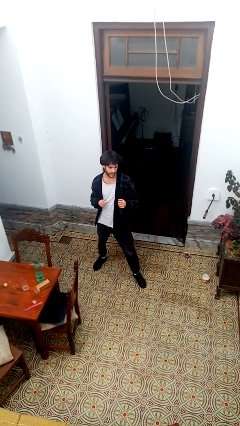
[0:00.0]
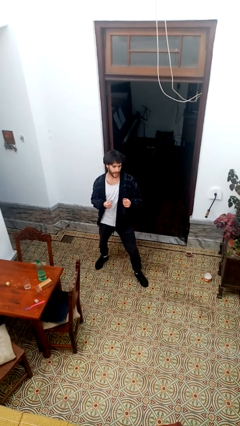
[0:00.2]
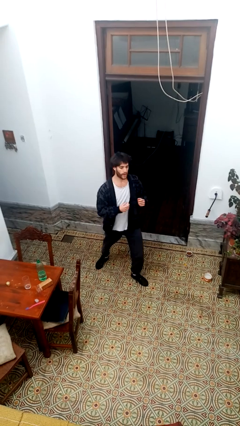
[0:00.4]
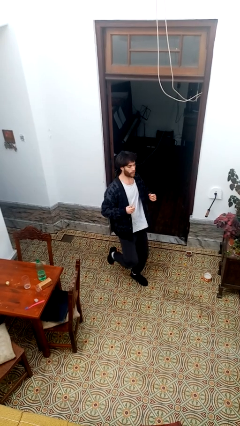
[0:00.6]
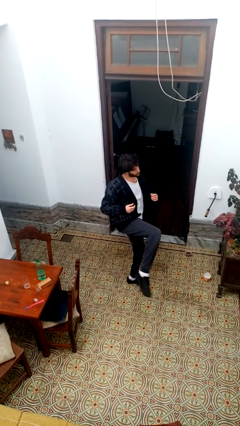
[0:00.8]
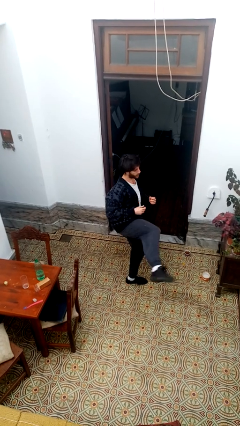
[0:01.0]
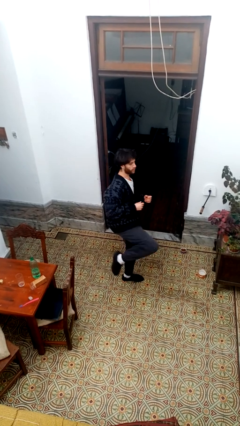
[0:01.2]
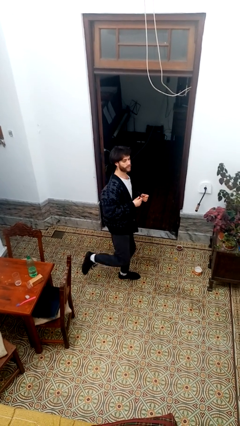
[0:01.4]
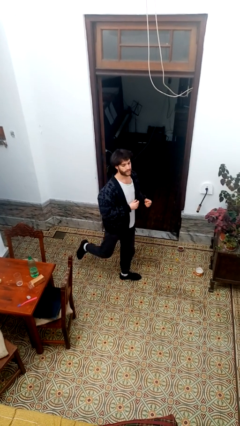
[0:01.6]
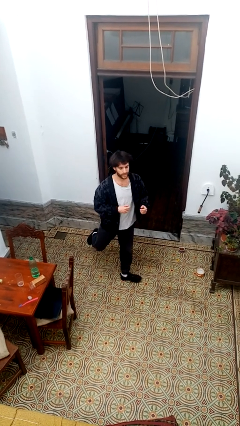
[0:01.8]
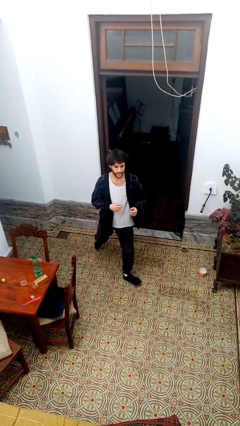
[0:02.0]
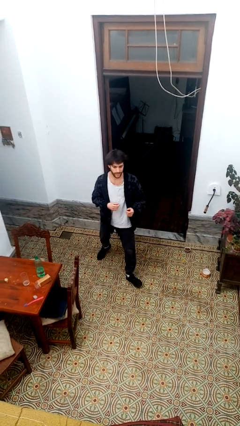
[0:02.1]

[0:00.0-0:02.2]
person karate kicks

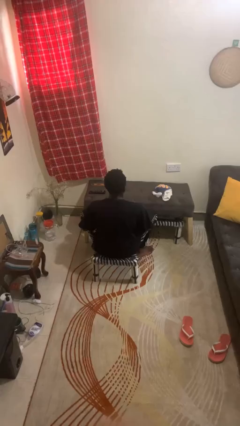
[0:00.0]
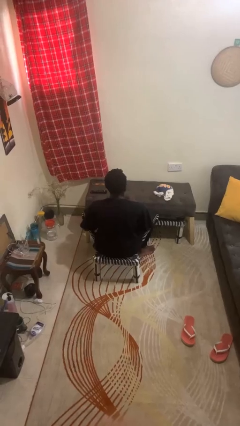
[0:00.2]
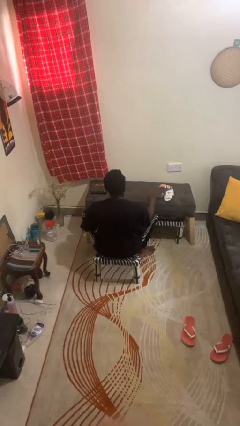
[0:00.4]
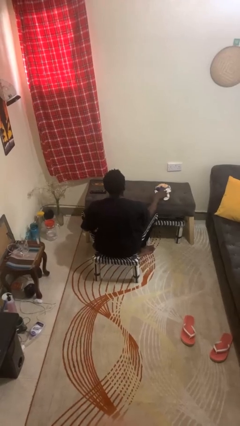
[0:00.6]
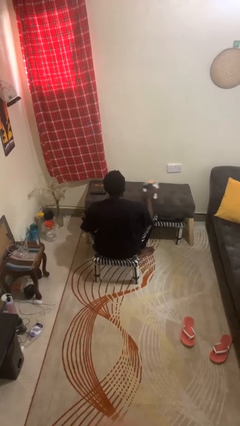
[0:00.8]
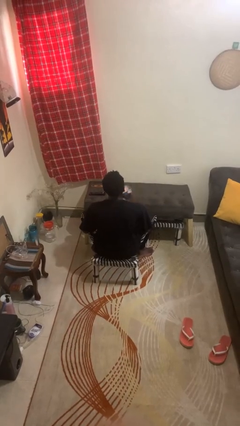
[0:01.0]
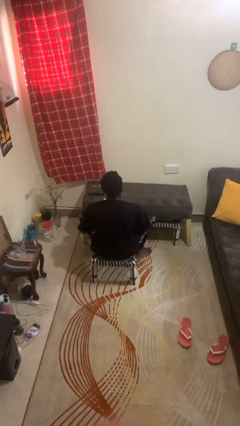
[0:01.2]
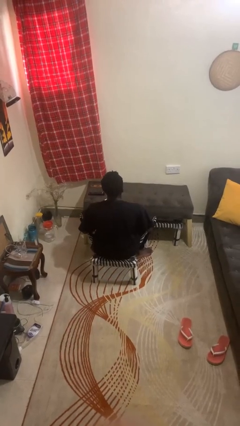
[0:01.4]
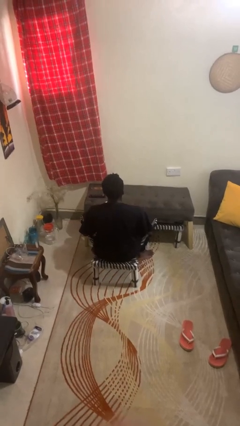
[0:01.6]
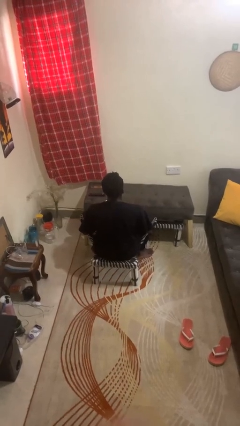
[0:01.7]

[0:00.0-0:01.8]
person picks up object from table

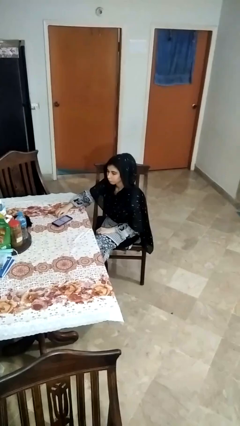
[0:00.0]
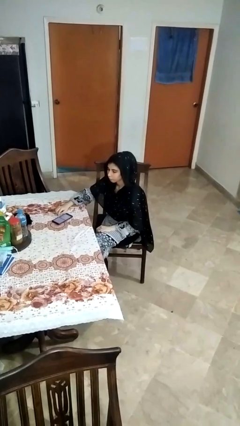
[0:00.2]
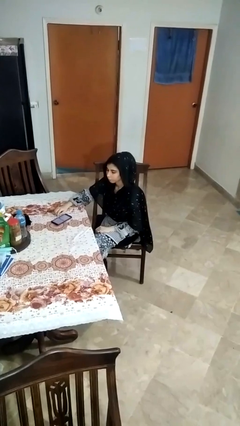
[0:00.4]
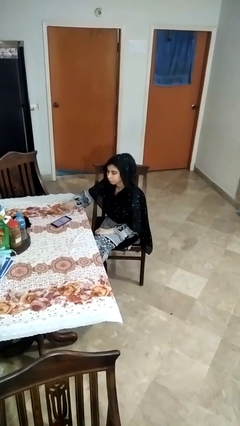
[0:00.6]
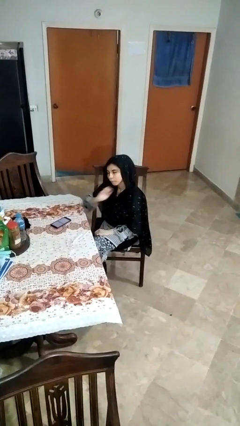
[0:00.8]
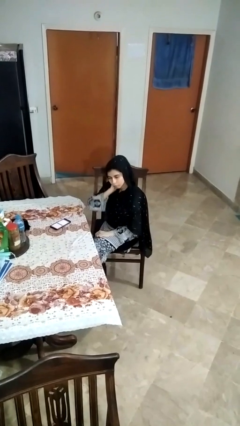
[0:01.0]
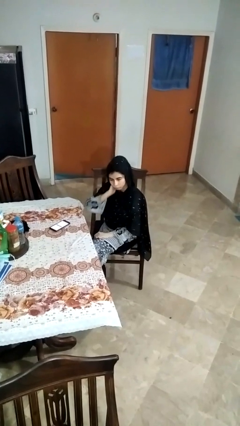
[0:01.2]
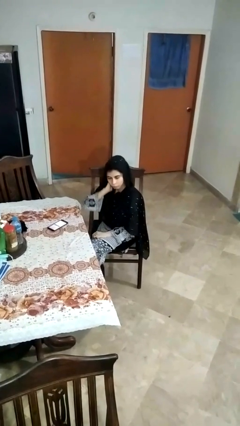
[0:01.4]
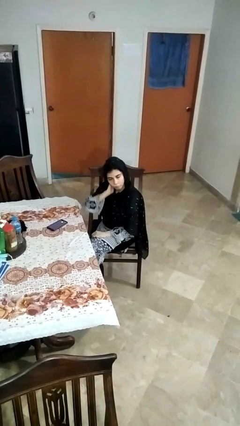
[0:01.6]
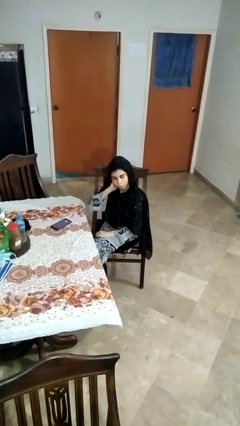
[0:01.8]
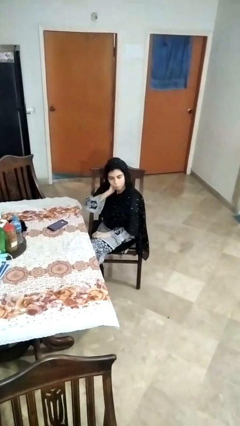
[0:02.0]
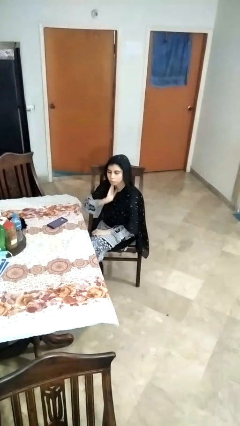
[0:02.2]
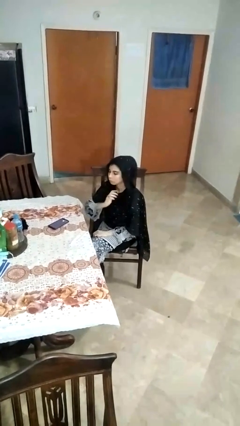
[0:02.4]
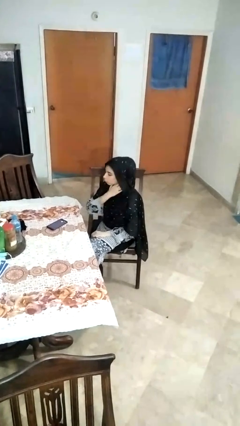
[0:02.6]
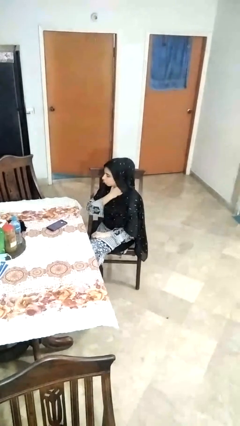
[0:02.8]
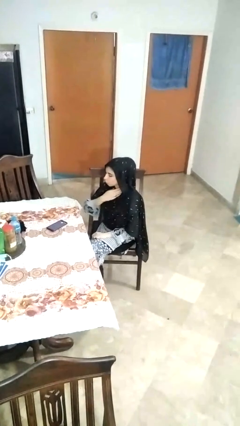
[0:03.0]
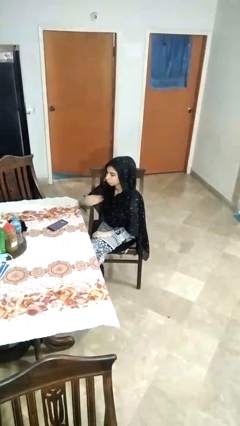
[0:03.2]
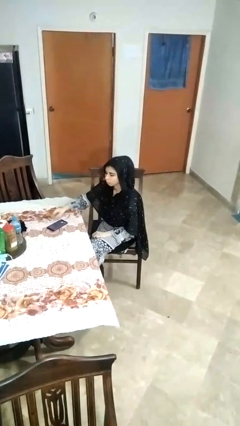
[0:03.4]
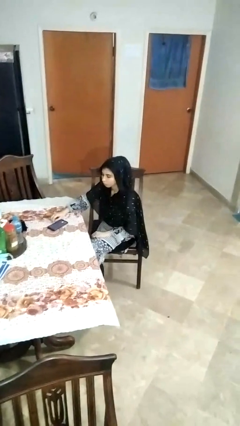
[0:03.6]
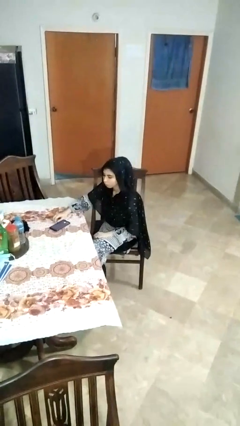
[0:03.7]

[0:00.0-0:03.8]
person rubs neck

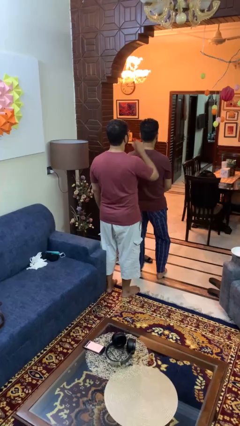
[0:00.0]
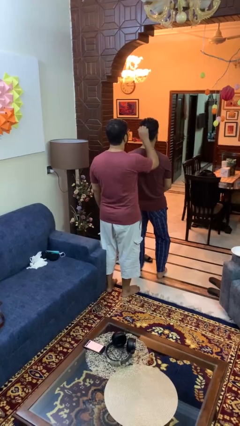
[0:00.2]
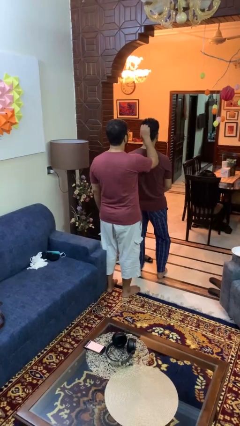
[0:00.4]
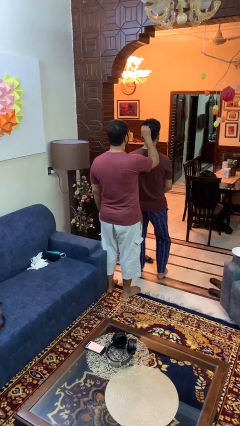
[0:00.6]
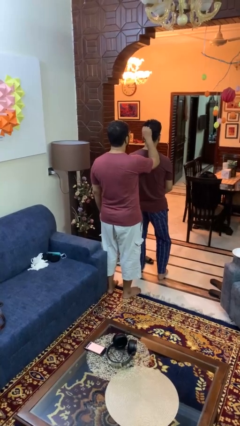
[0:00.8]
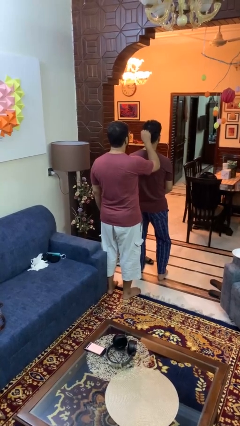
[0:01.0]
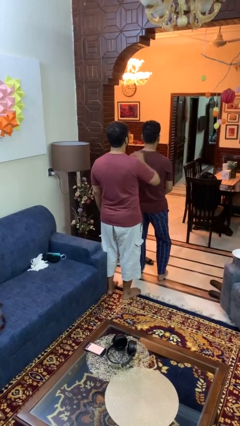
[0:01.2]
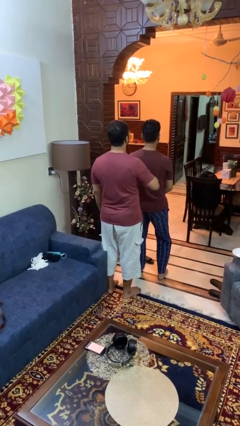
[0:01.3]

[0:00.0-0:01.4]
person grabs person by hair

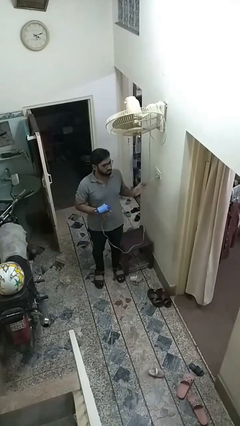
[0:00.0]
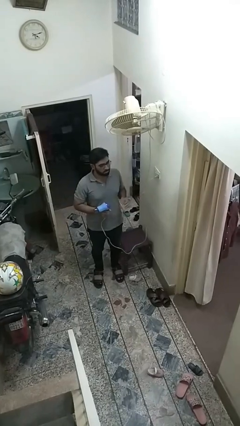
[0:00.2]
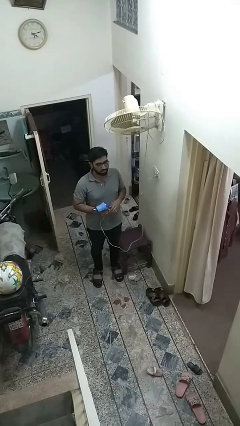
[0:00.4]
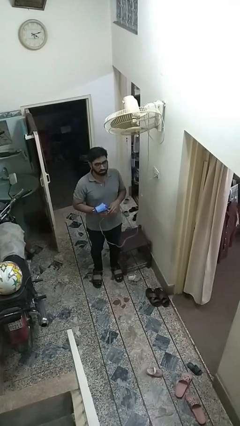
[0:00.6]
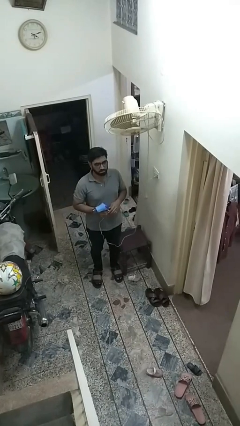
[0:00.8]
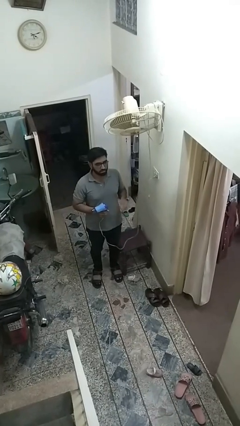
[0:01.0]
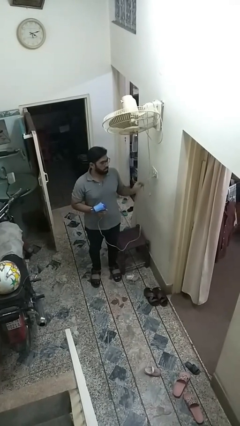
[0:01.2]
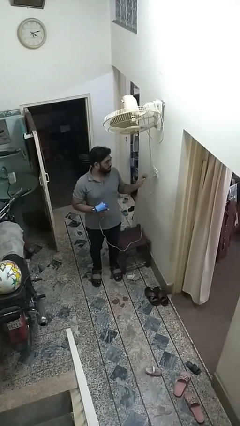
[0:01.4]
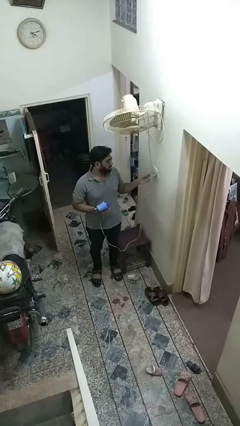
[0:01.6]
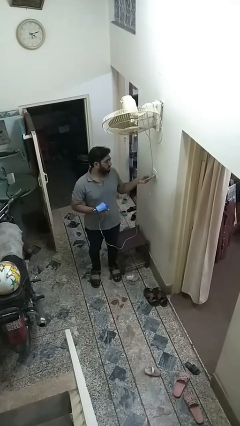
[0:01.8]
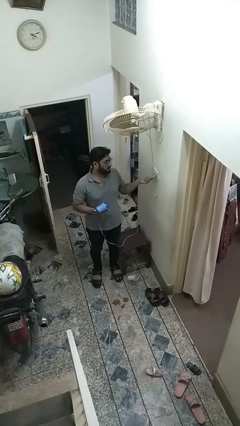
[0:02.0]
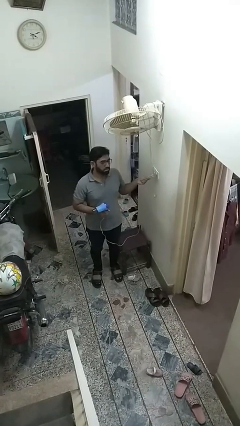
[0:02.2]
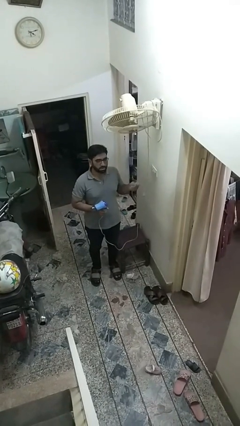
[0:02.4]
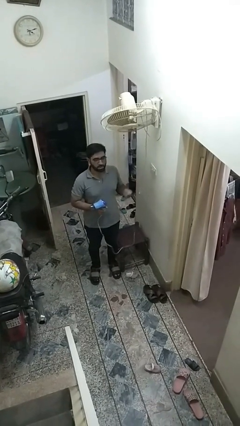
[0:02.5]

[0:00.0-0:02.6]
person unplugs from electrical socket

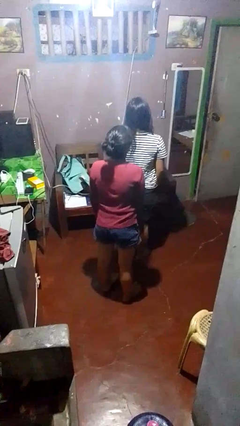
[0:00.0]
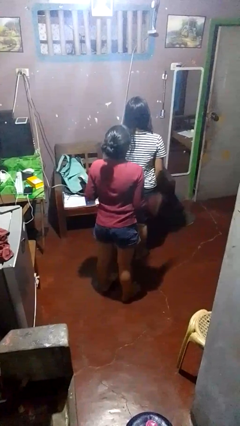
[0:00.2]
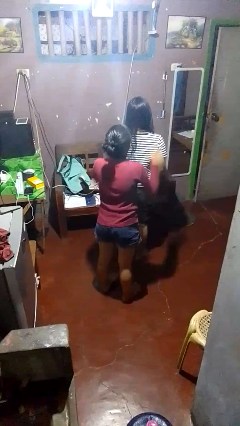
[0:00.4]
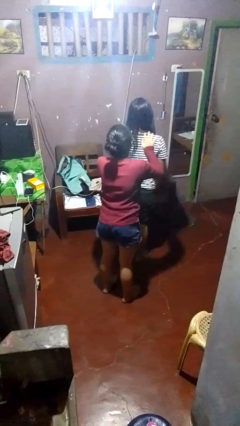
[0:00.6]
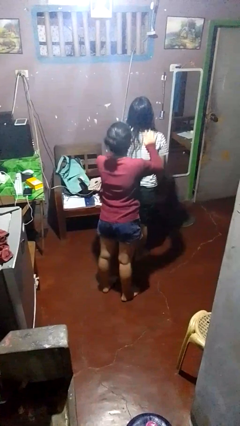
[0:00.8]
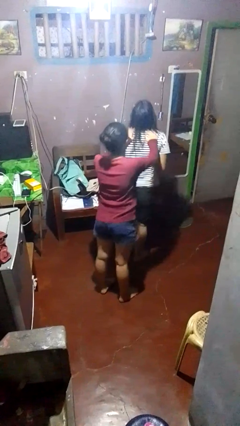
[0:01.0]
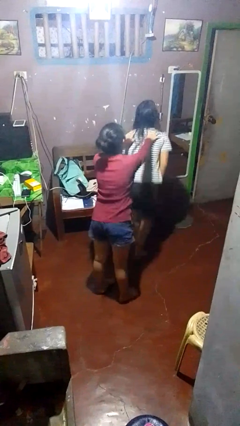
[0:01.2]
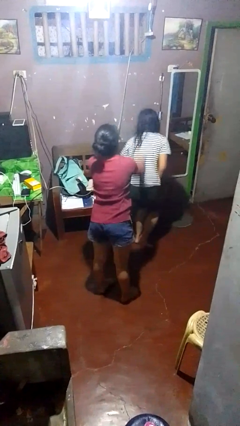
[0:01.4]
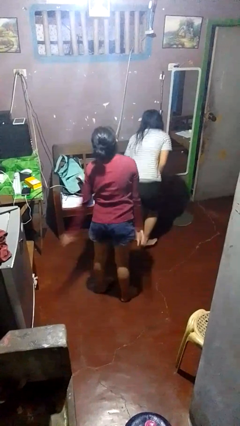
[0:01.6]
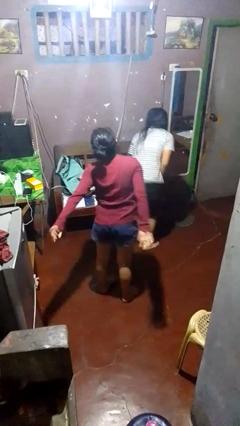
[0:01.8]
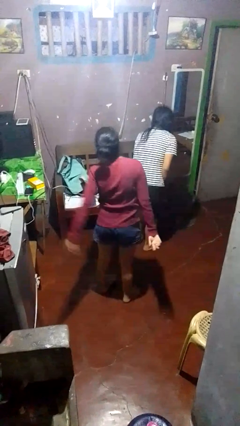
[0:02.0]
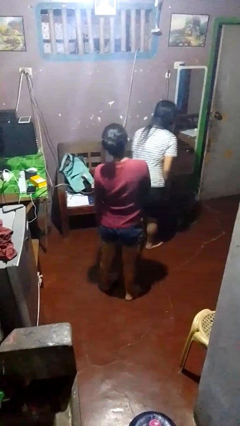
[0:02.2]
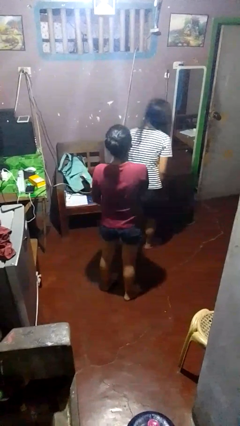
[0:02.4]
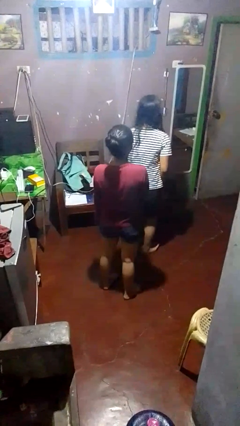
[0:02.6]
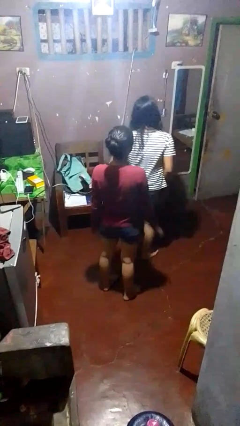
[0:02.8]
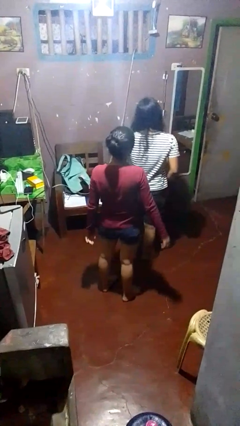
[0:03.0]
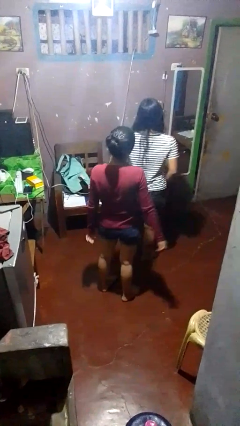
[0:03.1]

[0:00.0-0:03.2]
person shoves person

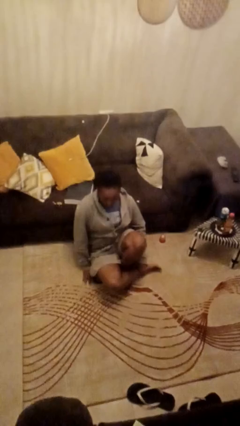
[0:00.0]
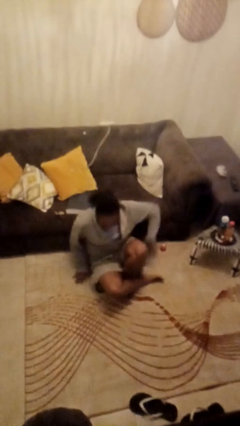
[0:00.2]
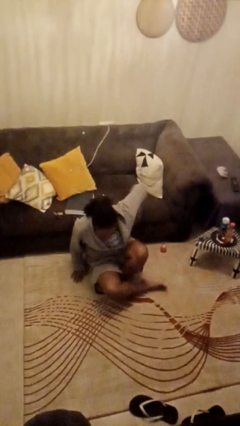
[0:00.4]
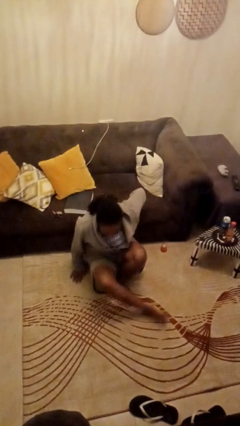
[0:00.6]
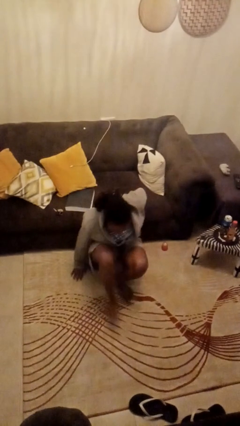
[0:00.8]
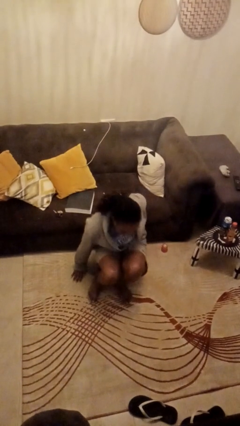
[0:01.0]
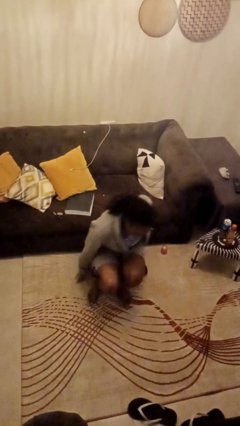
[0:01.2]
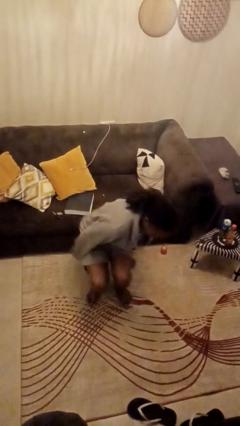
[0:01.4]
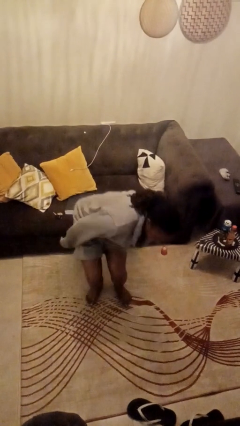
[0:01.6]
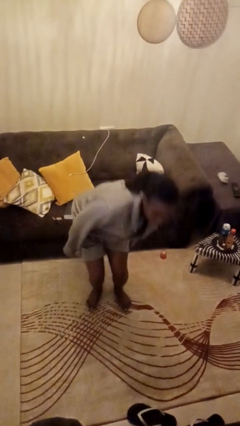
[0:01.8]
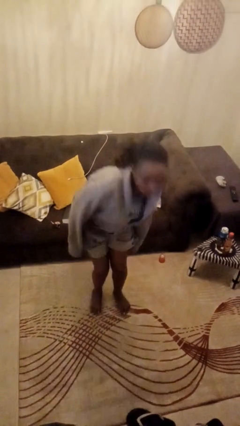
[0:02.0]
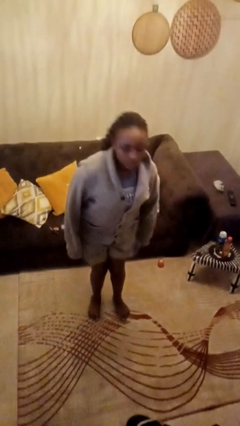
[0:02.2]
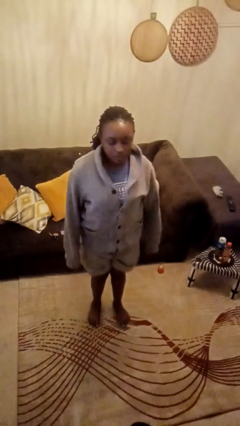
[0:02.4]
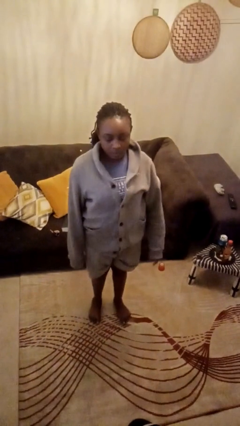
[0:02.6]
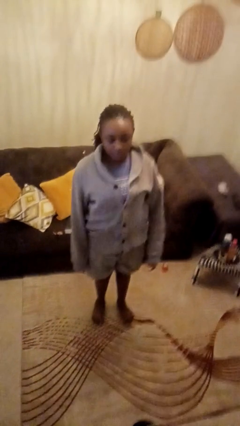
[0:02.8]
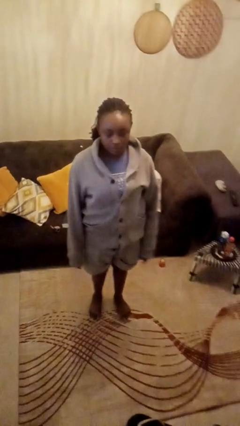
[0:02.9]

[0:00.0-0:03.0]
person stands up from floor
